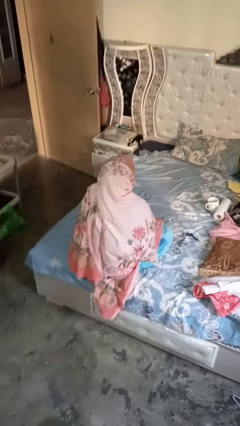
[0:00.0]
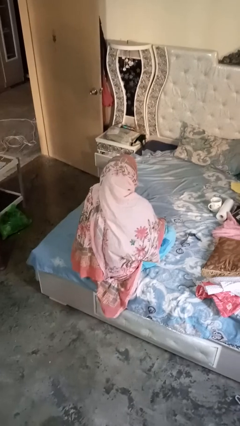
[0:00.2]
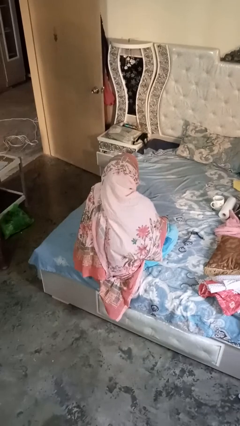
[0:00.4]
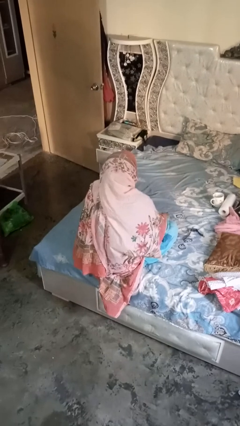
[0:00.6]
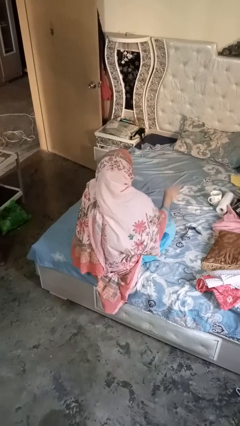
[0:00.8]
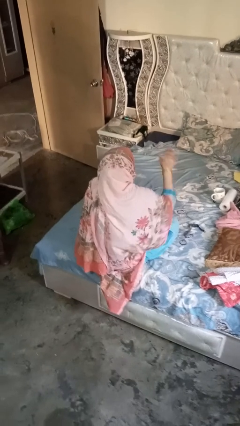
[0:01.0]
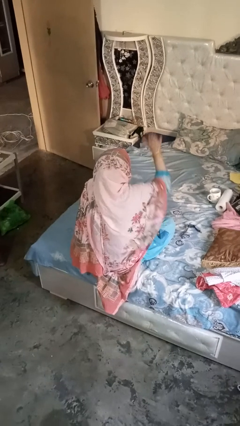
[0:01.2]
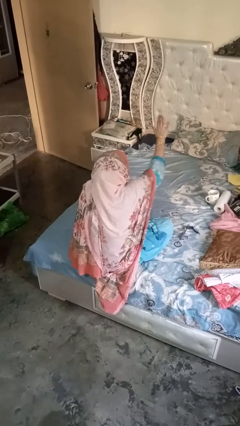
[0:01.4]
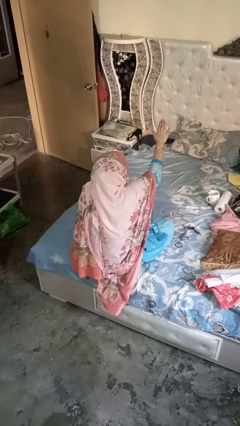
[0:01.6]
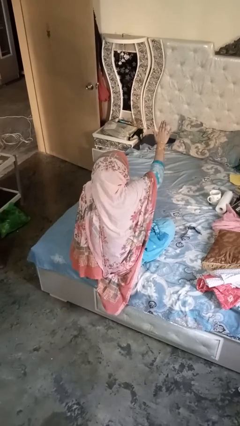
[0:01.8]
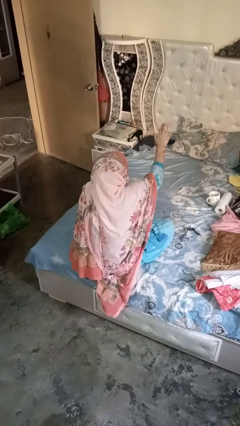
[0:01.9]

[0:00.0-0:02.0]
person gestures stop

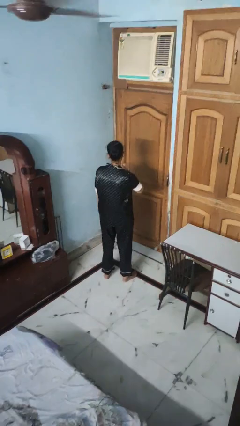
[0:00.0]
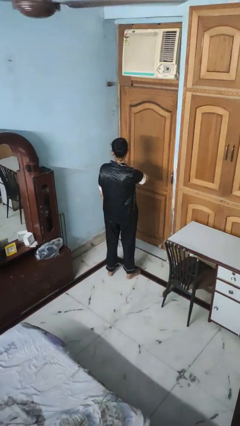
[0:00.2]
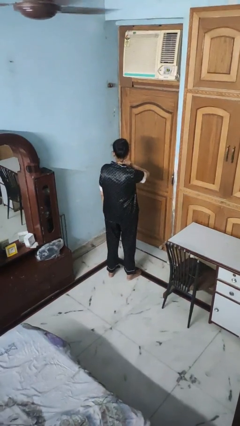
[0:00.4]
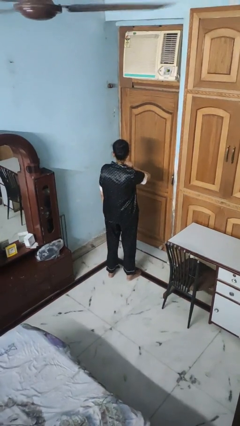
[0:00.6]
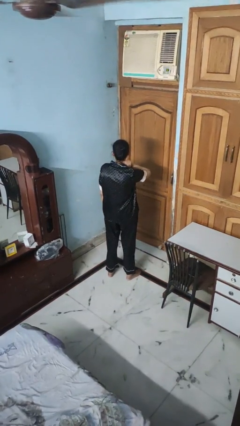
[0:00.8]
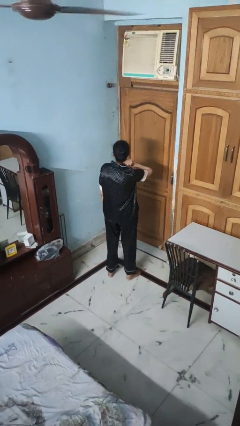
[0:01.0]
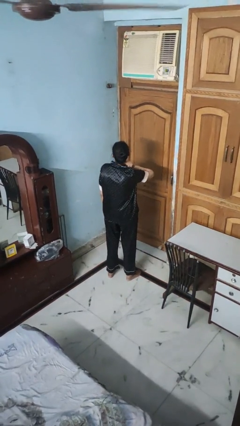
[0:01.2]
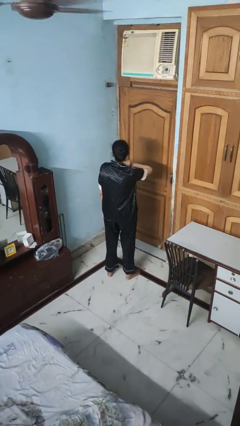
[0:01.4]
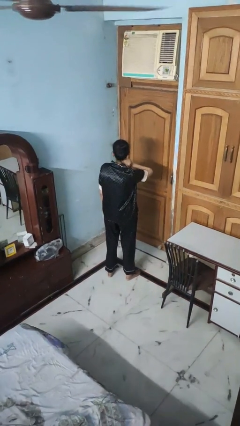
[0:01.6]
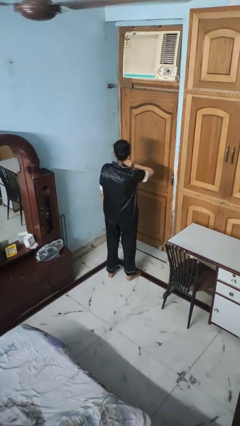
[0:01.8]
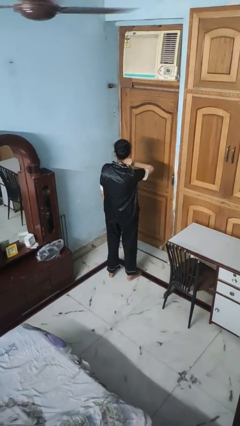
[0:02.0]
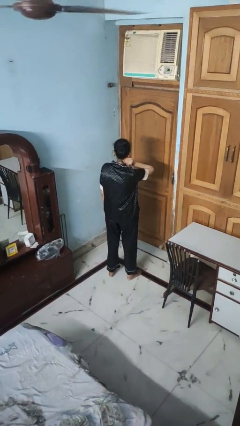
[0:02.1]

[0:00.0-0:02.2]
person rubs neck

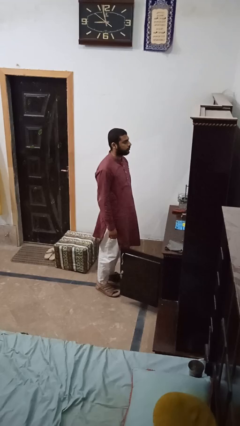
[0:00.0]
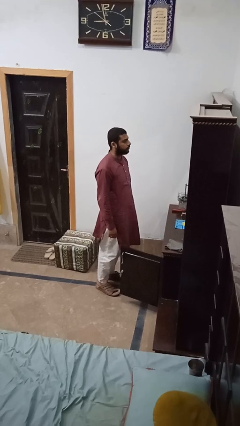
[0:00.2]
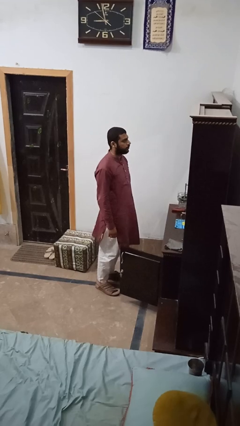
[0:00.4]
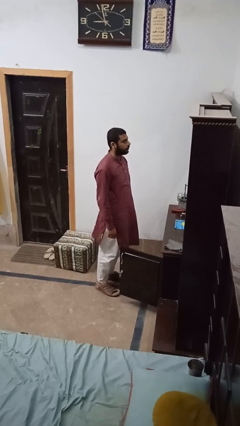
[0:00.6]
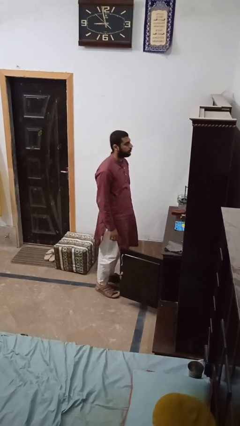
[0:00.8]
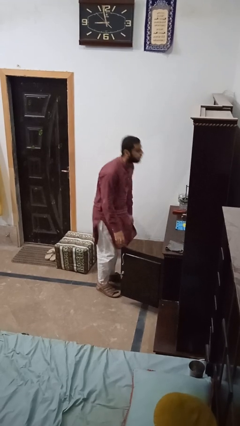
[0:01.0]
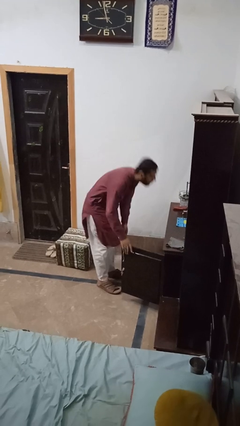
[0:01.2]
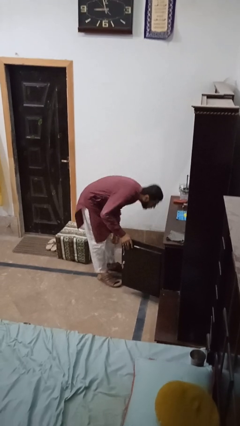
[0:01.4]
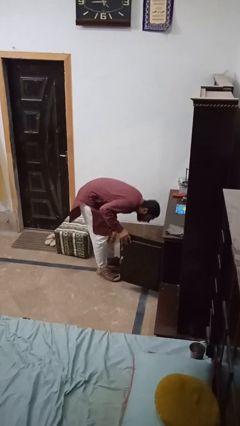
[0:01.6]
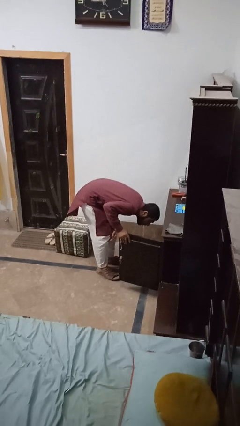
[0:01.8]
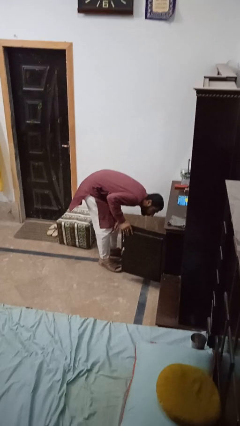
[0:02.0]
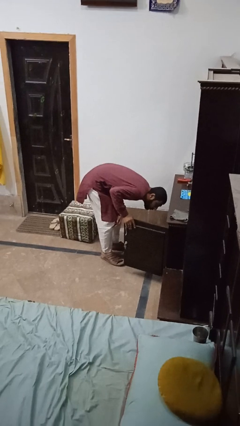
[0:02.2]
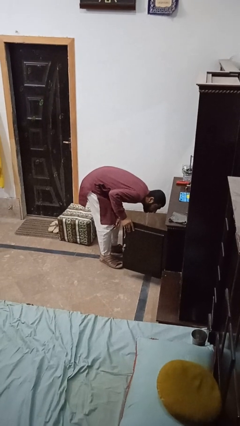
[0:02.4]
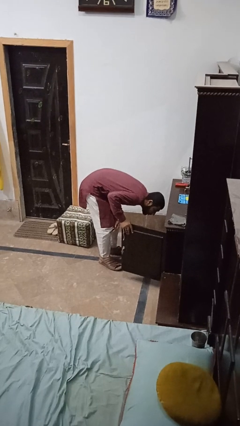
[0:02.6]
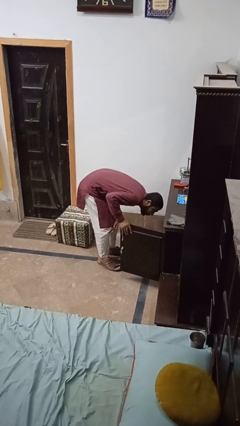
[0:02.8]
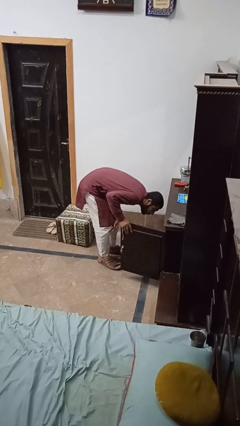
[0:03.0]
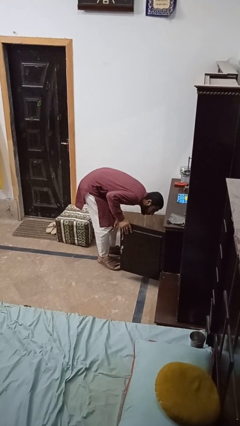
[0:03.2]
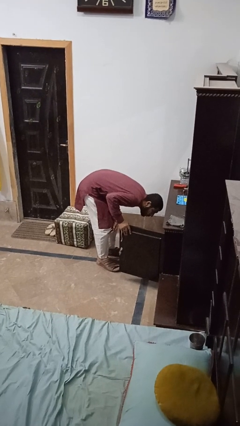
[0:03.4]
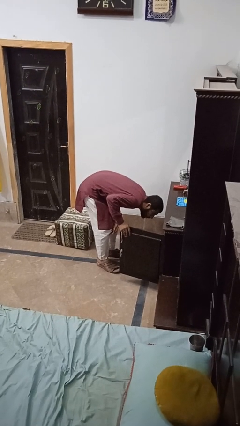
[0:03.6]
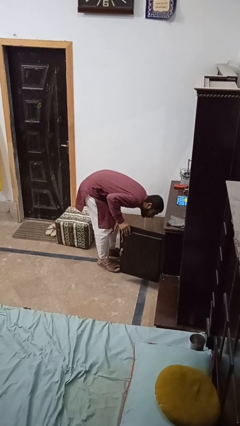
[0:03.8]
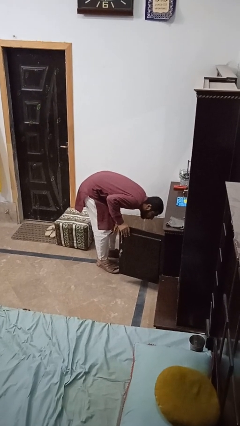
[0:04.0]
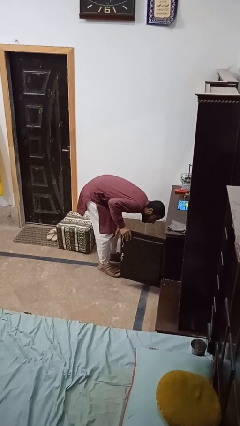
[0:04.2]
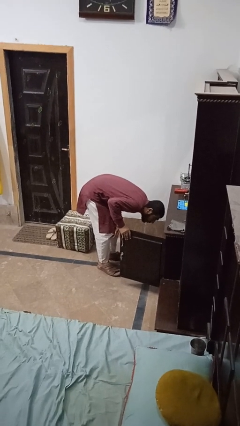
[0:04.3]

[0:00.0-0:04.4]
person searches in cabinet

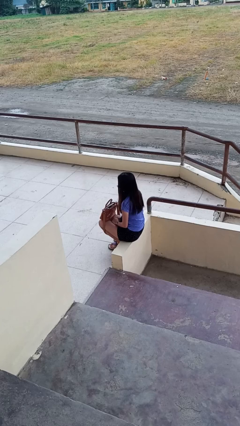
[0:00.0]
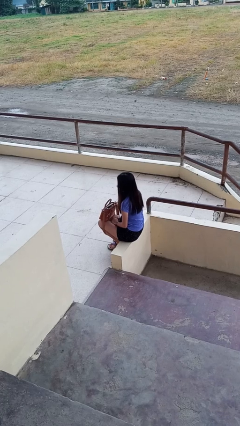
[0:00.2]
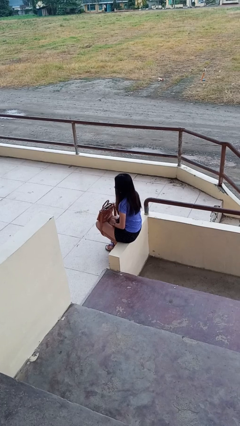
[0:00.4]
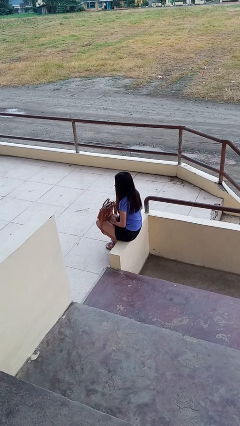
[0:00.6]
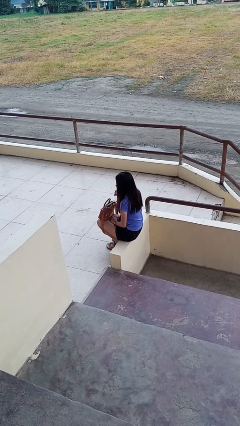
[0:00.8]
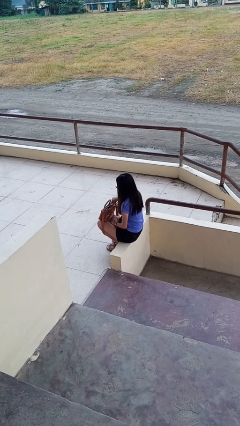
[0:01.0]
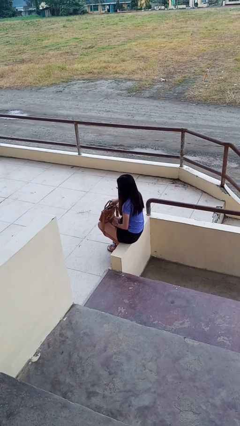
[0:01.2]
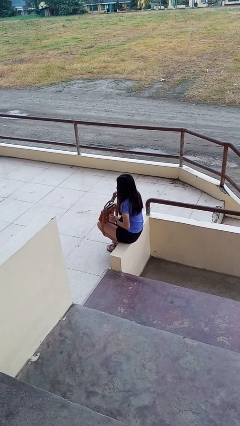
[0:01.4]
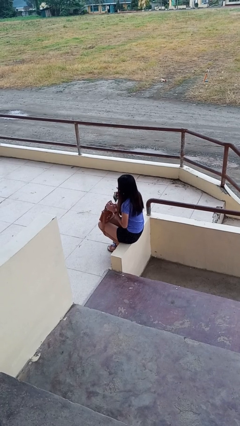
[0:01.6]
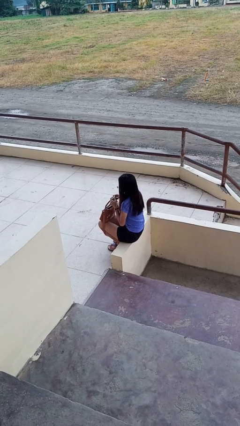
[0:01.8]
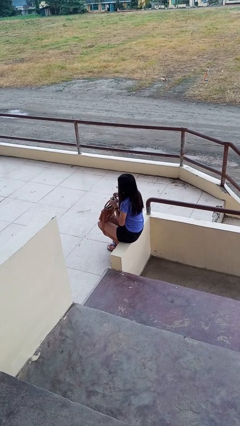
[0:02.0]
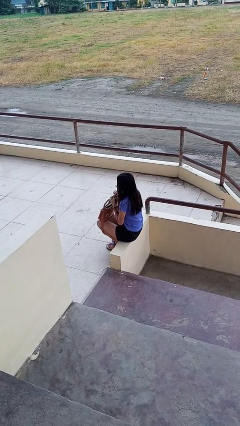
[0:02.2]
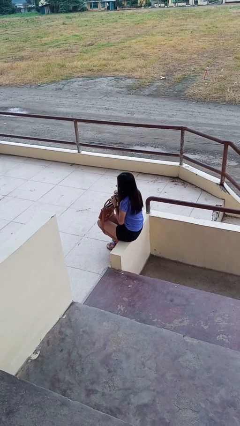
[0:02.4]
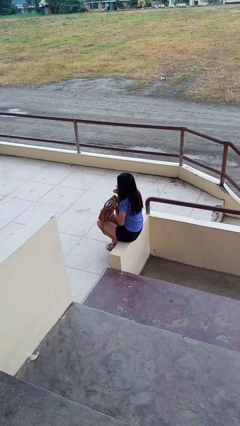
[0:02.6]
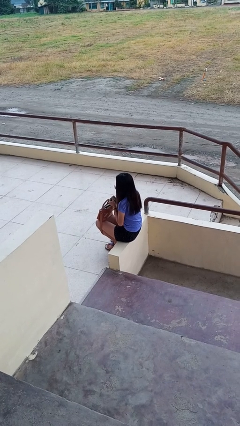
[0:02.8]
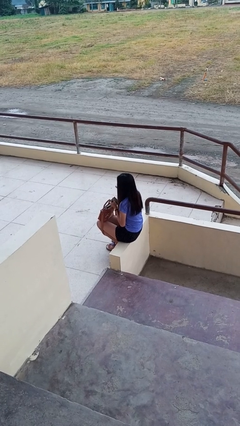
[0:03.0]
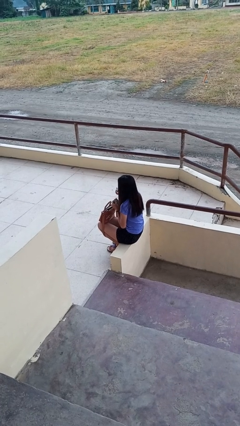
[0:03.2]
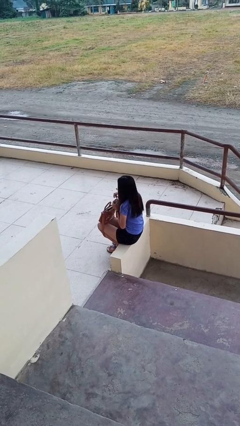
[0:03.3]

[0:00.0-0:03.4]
person eats snack from bag

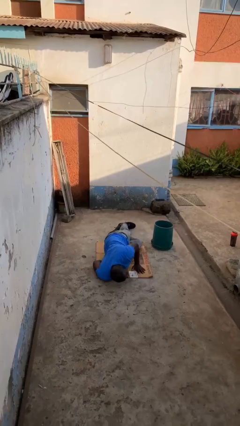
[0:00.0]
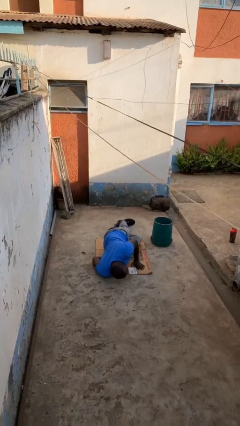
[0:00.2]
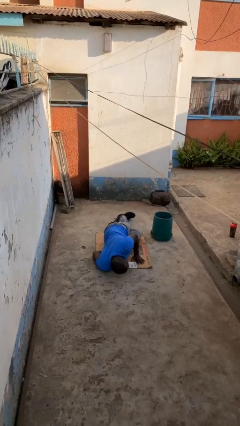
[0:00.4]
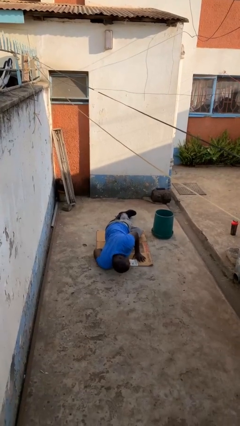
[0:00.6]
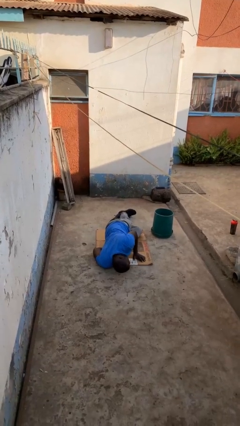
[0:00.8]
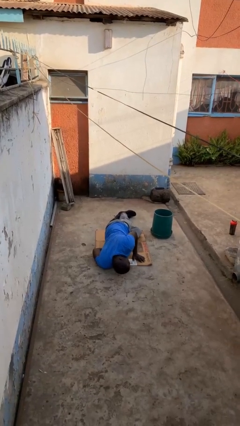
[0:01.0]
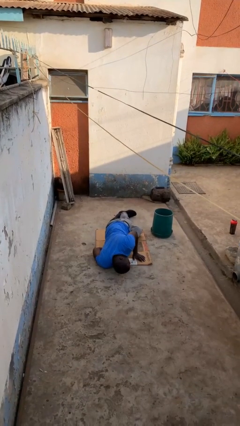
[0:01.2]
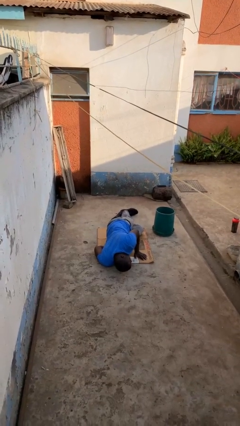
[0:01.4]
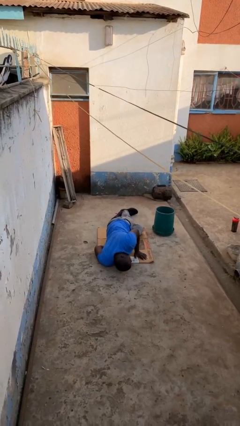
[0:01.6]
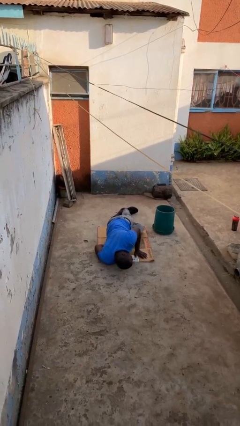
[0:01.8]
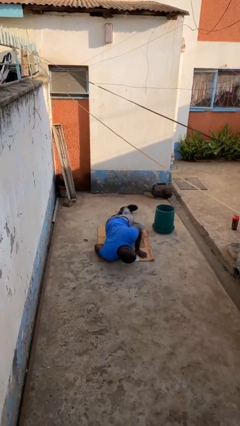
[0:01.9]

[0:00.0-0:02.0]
person lies down on floor

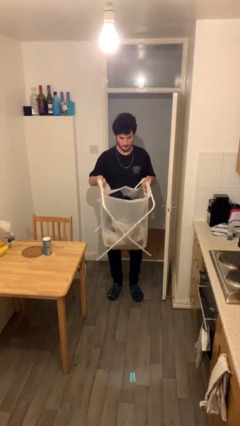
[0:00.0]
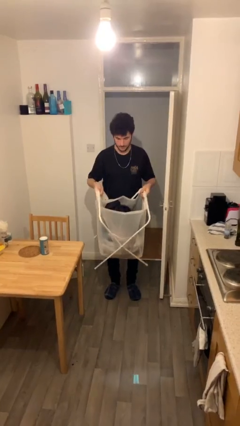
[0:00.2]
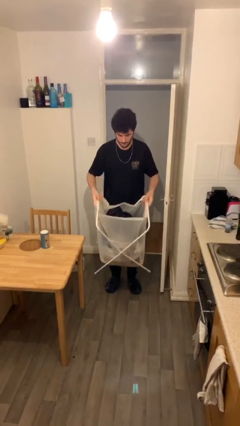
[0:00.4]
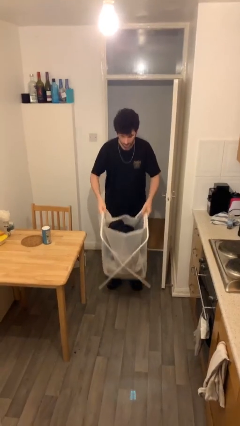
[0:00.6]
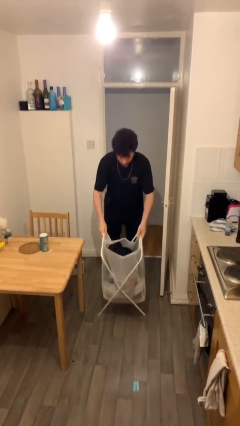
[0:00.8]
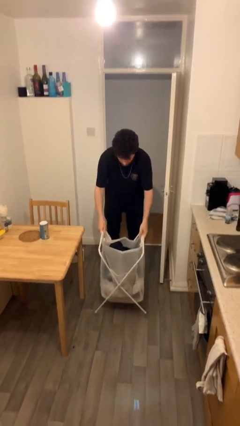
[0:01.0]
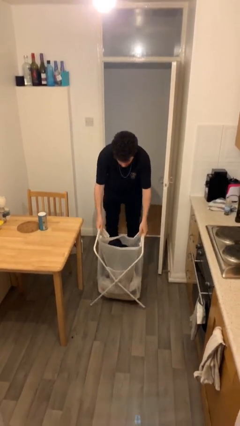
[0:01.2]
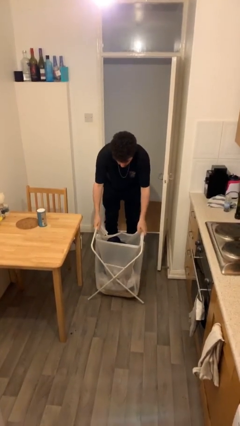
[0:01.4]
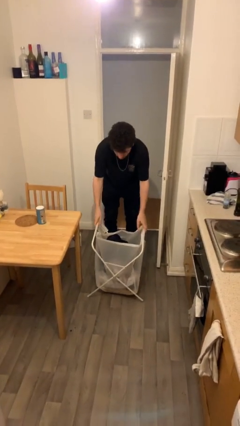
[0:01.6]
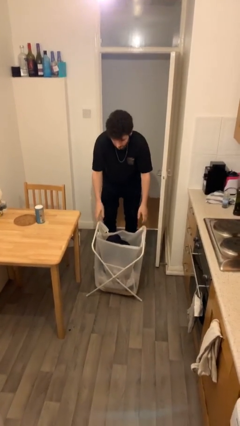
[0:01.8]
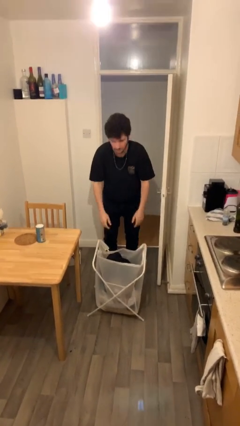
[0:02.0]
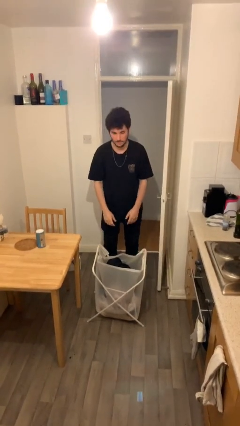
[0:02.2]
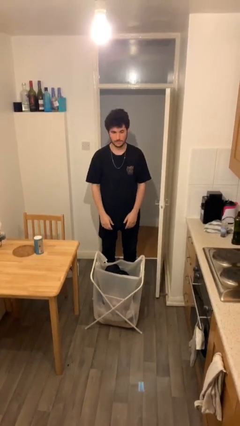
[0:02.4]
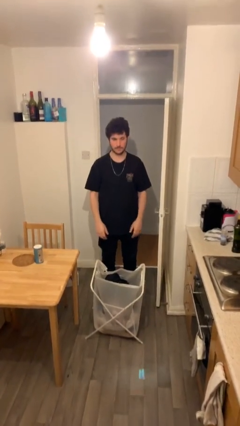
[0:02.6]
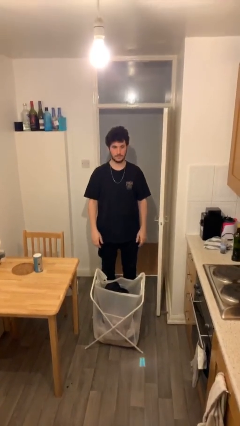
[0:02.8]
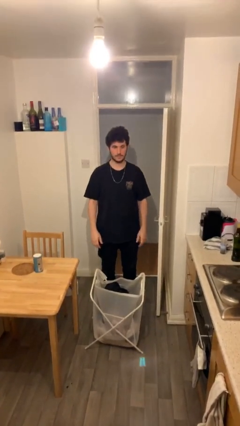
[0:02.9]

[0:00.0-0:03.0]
person puts down object on floor

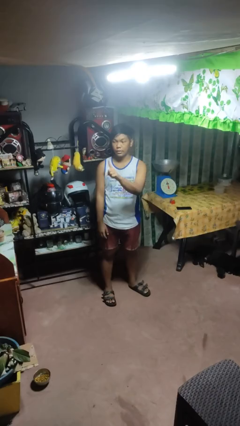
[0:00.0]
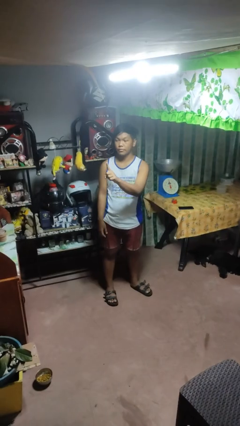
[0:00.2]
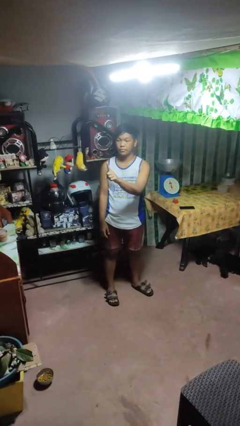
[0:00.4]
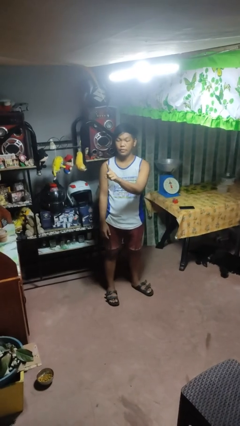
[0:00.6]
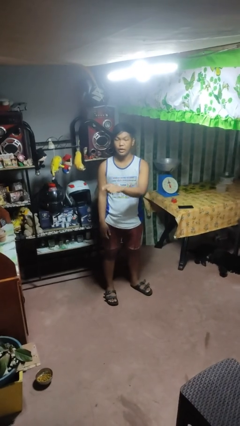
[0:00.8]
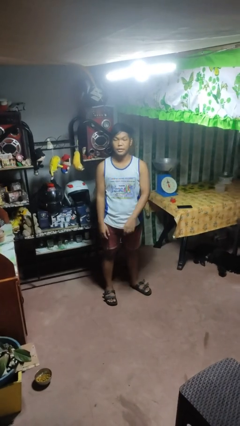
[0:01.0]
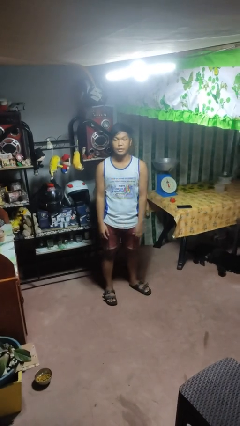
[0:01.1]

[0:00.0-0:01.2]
person gestures number one
